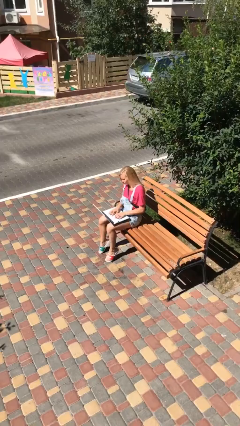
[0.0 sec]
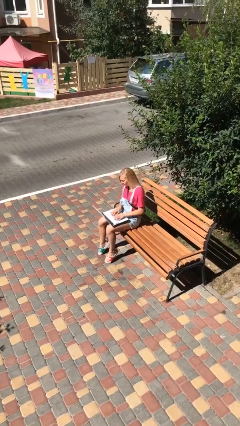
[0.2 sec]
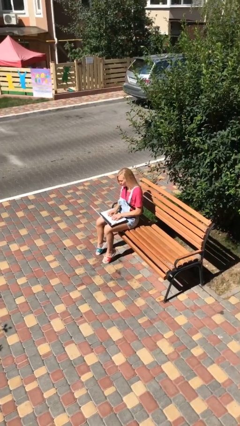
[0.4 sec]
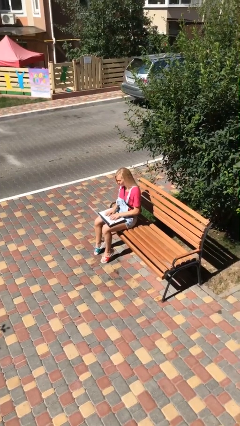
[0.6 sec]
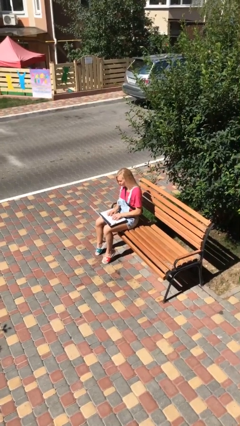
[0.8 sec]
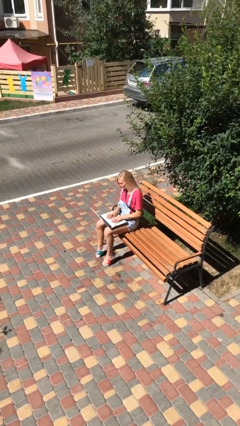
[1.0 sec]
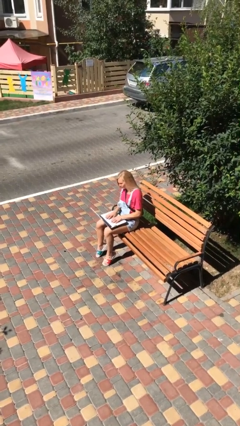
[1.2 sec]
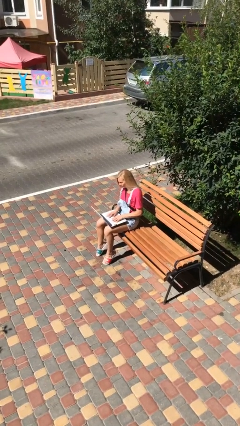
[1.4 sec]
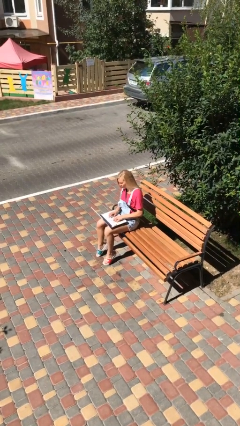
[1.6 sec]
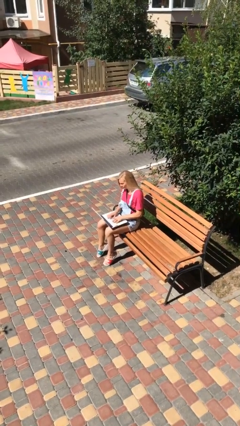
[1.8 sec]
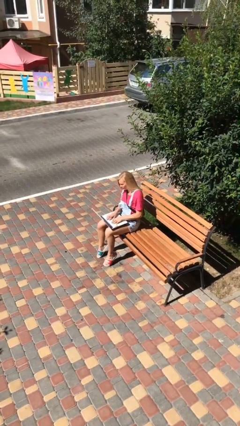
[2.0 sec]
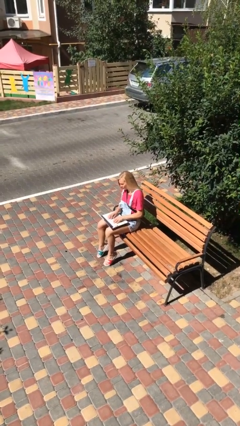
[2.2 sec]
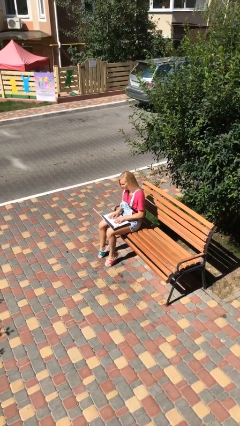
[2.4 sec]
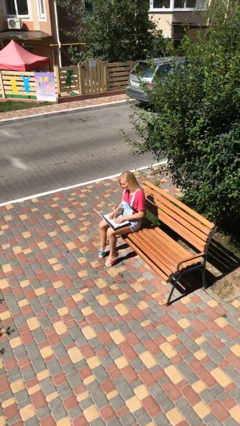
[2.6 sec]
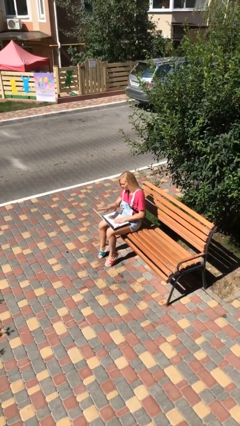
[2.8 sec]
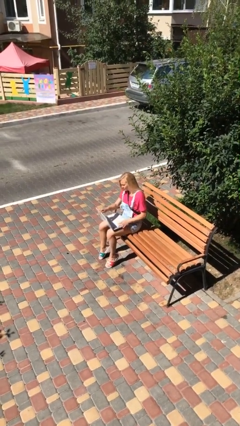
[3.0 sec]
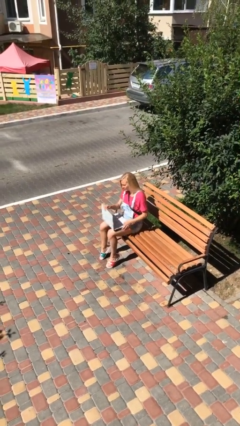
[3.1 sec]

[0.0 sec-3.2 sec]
person interacts with laptop

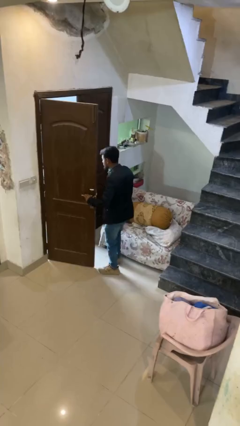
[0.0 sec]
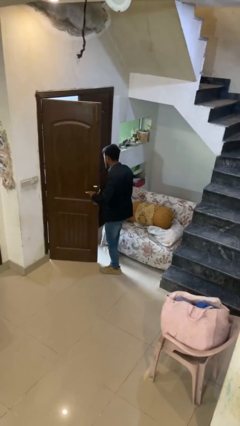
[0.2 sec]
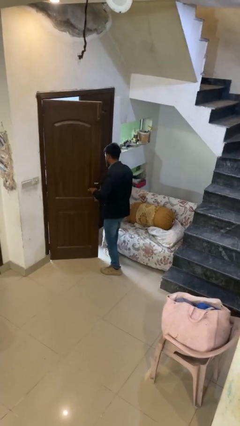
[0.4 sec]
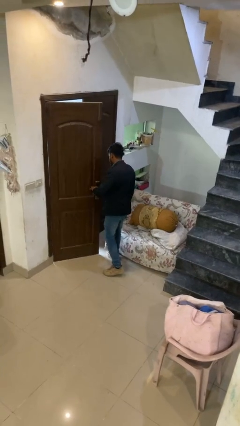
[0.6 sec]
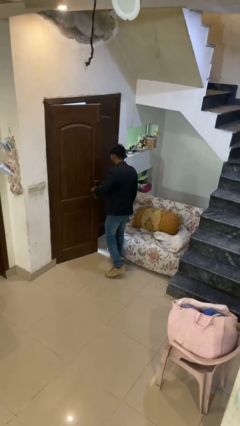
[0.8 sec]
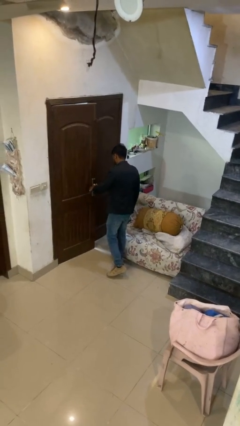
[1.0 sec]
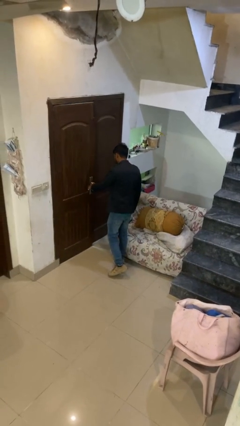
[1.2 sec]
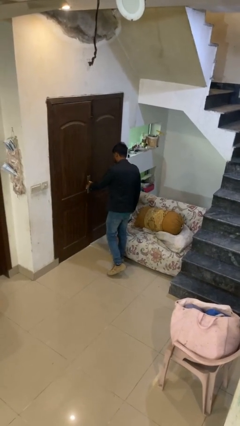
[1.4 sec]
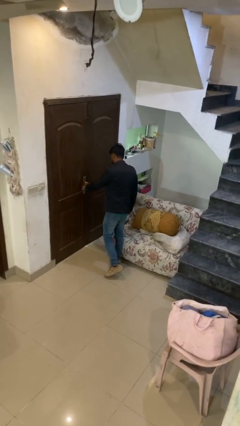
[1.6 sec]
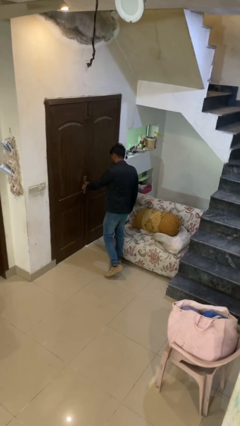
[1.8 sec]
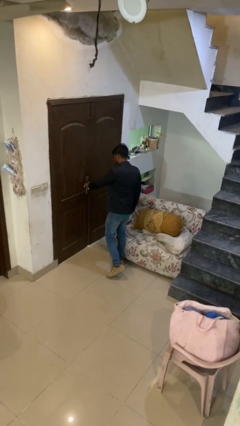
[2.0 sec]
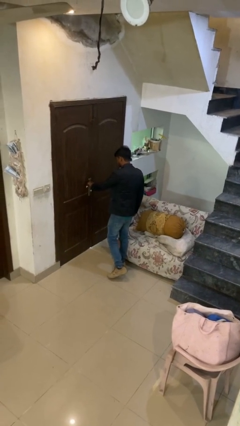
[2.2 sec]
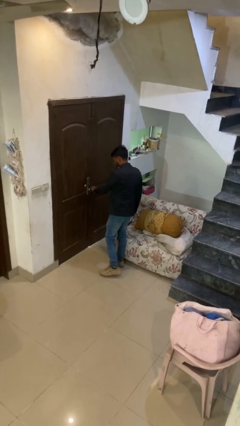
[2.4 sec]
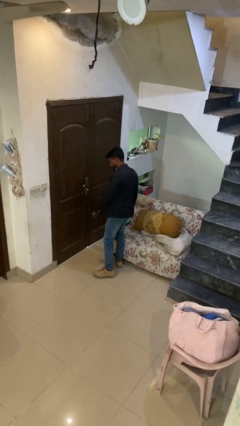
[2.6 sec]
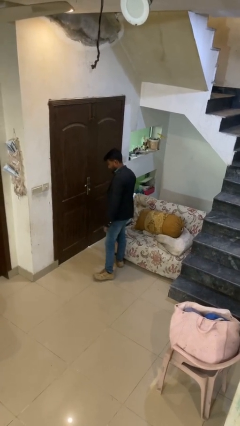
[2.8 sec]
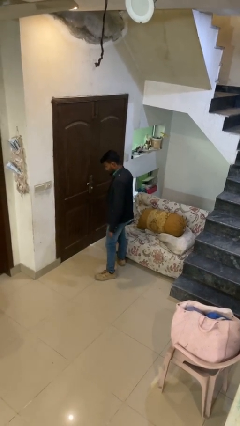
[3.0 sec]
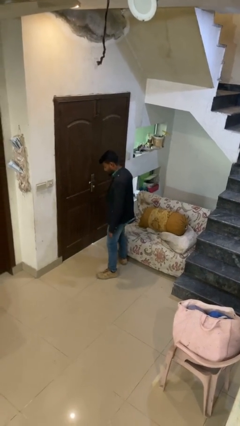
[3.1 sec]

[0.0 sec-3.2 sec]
person closes facility door

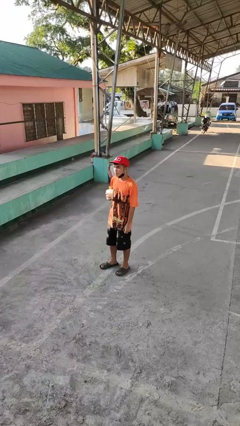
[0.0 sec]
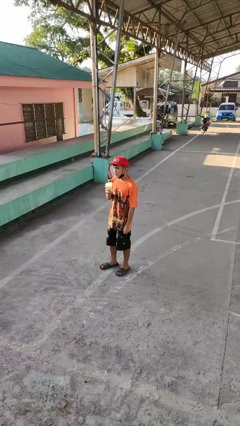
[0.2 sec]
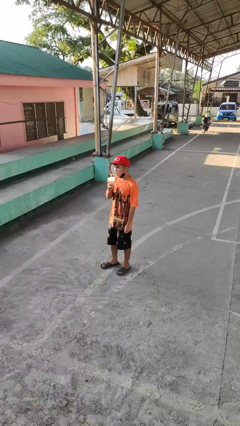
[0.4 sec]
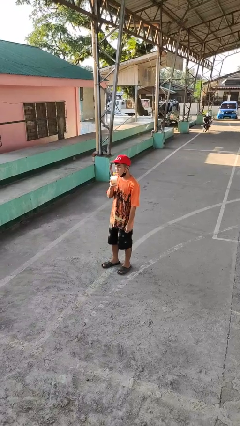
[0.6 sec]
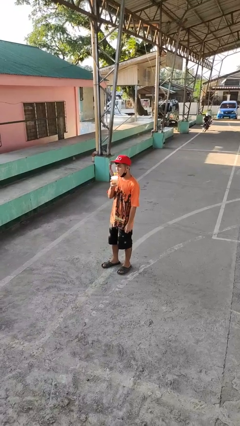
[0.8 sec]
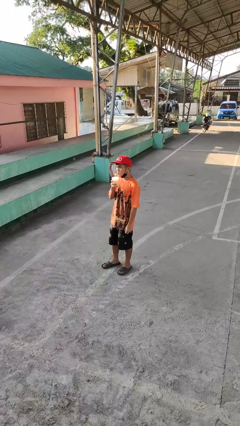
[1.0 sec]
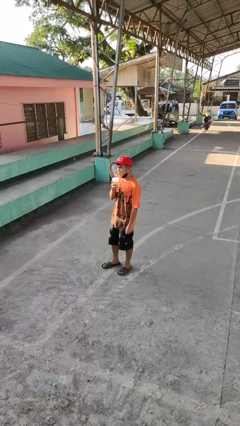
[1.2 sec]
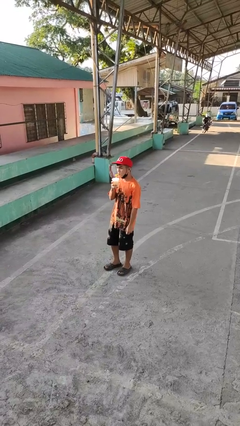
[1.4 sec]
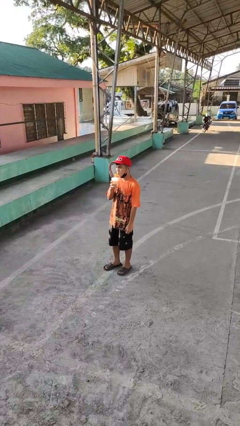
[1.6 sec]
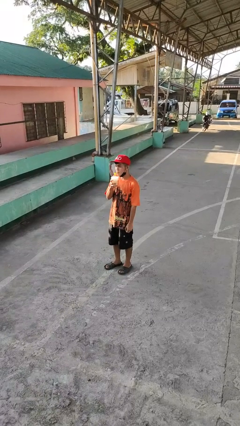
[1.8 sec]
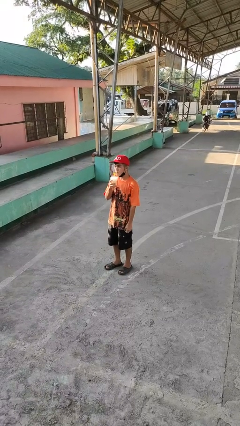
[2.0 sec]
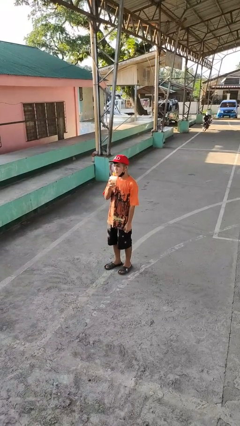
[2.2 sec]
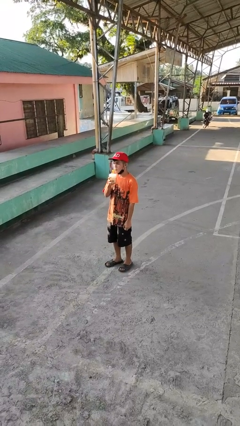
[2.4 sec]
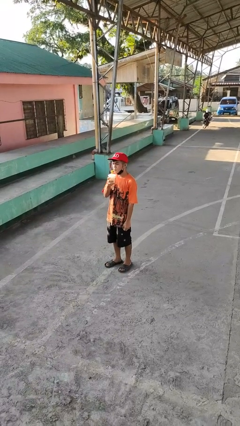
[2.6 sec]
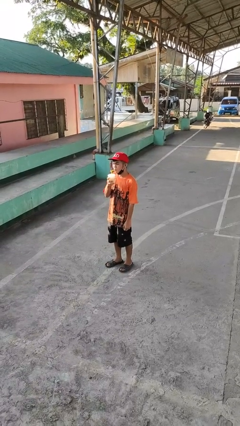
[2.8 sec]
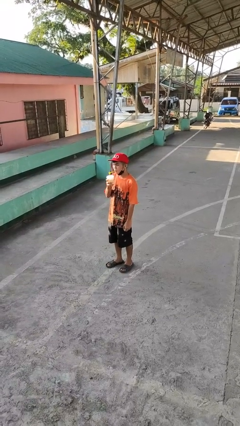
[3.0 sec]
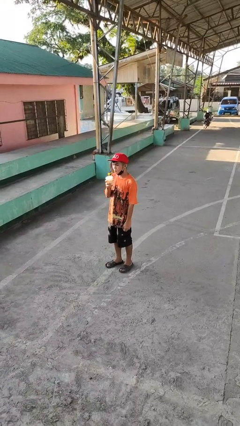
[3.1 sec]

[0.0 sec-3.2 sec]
person drinks from straw

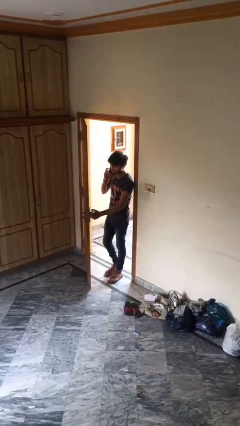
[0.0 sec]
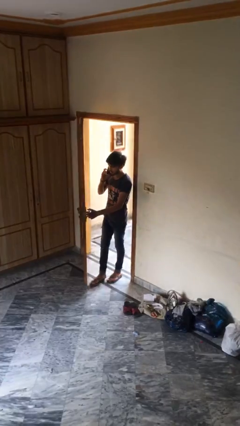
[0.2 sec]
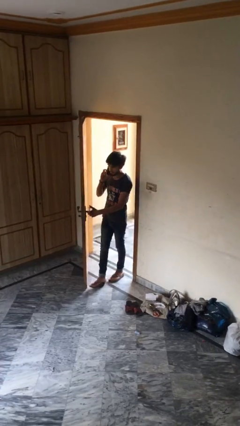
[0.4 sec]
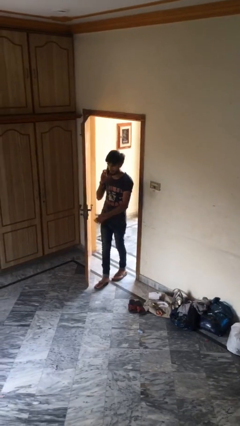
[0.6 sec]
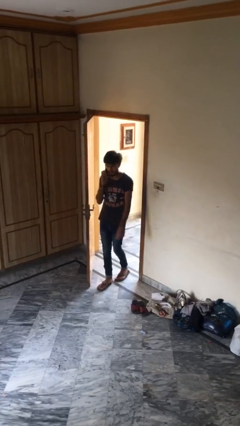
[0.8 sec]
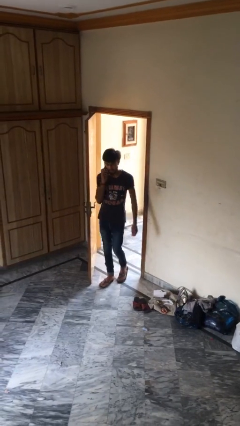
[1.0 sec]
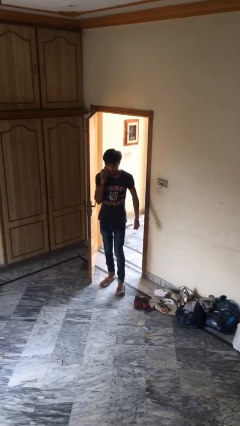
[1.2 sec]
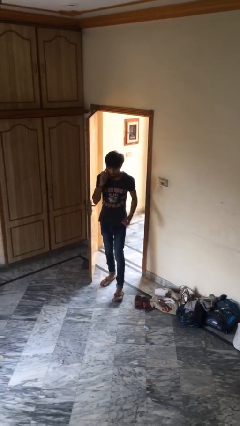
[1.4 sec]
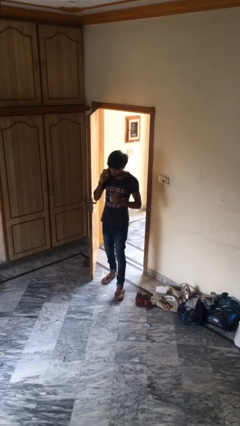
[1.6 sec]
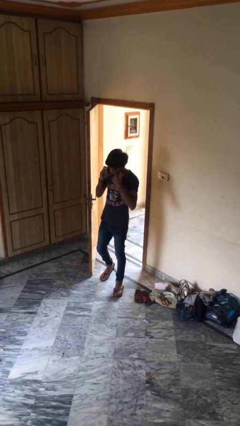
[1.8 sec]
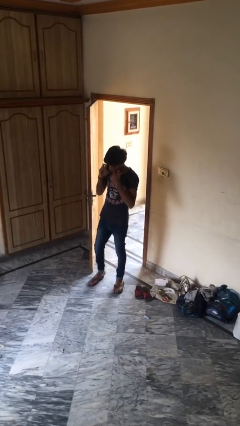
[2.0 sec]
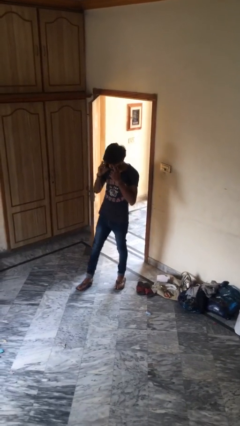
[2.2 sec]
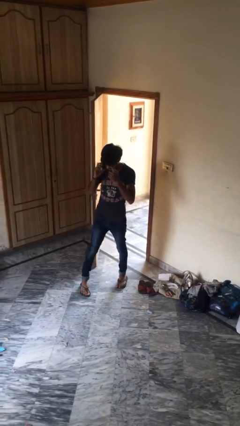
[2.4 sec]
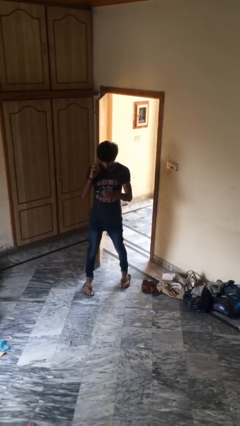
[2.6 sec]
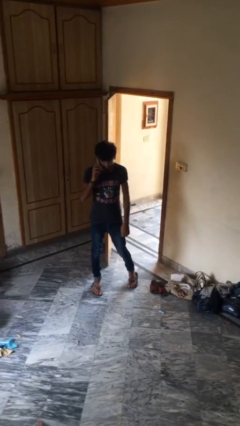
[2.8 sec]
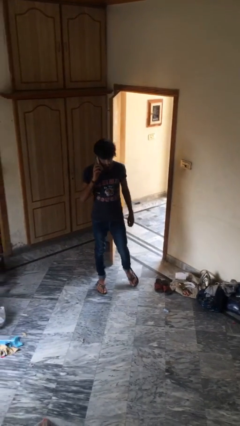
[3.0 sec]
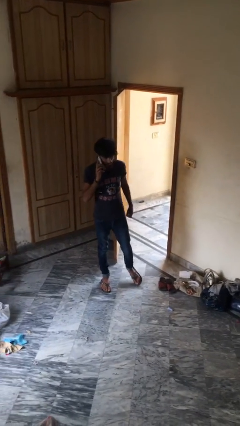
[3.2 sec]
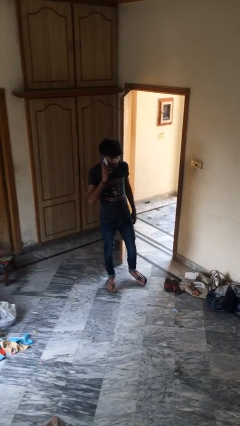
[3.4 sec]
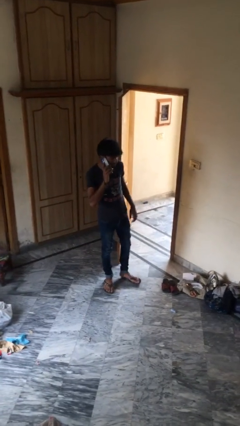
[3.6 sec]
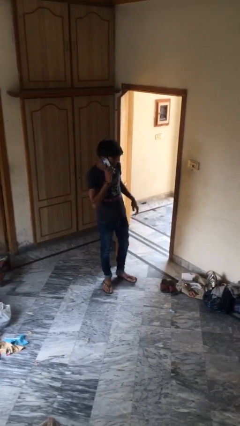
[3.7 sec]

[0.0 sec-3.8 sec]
person enters scene through structure

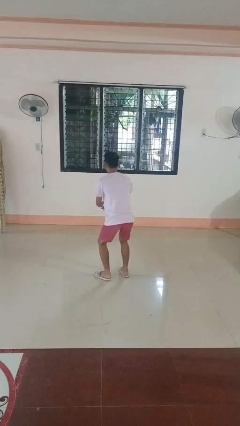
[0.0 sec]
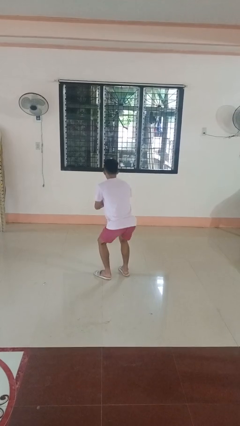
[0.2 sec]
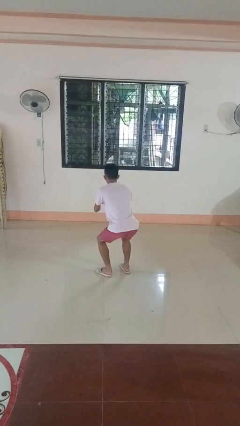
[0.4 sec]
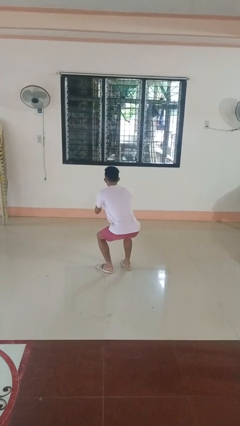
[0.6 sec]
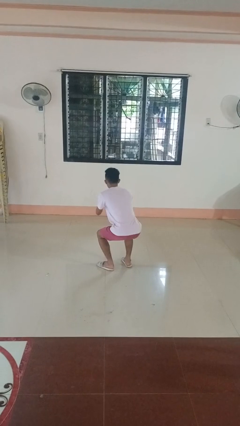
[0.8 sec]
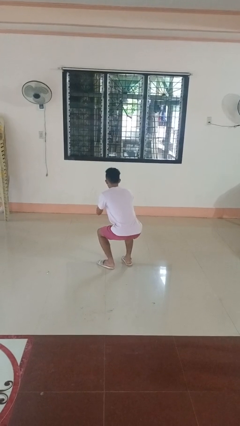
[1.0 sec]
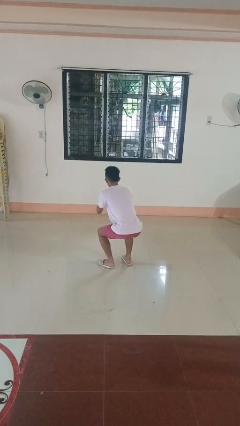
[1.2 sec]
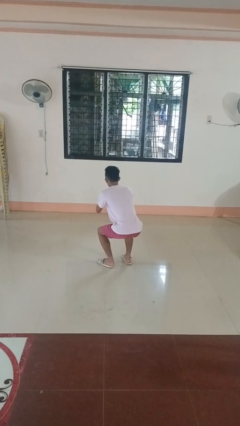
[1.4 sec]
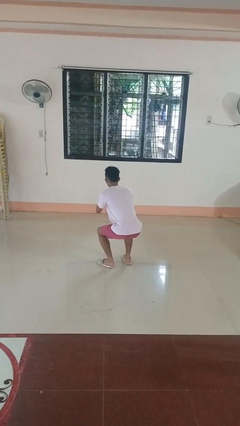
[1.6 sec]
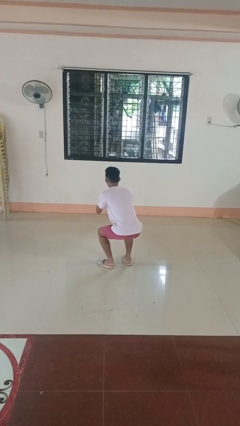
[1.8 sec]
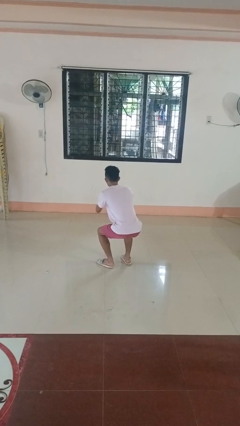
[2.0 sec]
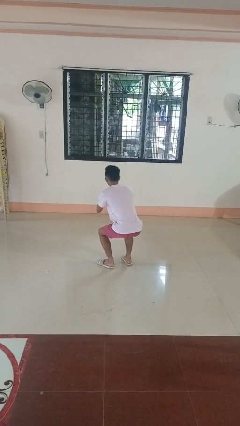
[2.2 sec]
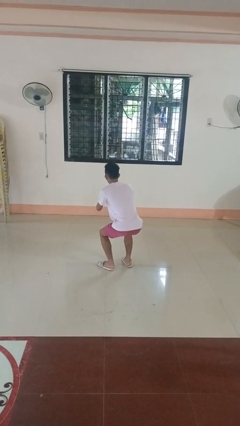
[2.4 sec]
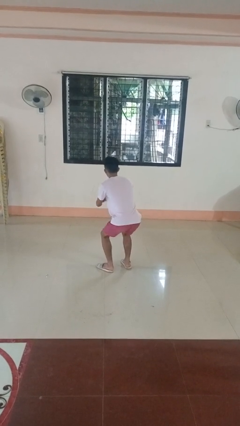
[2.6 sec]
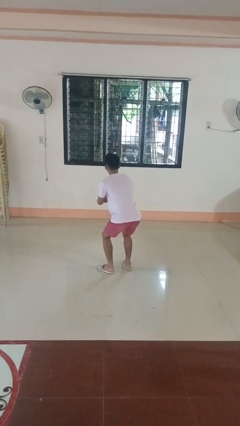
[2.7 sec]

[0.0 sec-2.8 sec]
person squats

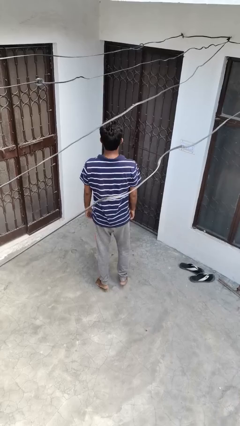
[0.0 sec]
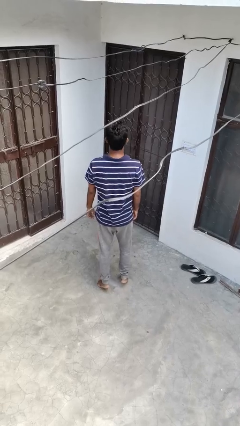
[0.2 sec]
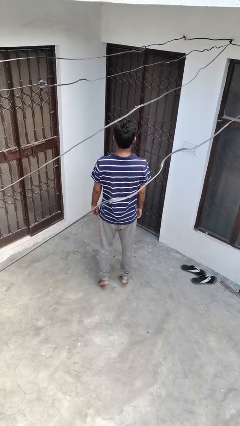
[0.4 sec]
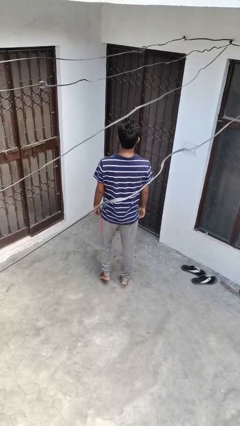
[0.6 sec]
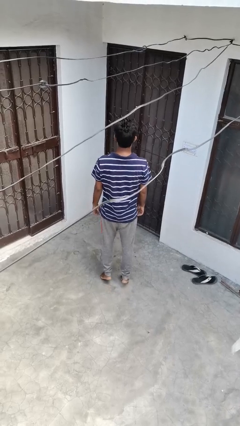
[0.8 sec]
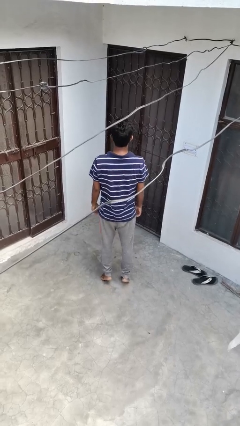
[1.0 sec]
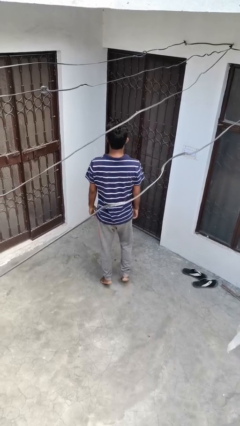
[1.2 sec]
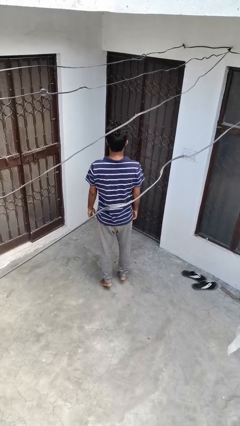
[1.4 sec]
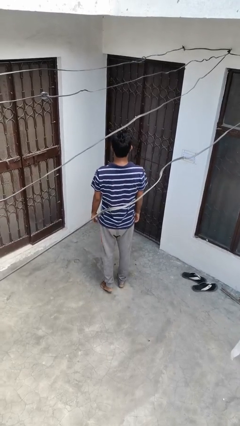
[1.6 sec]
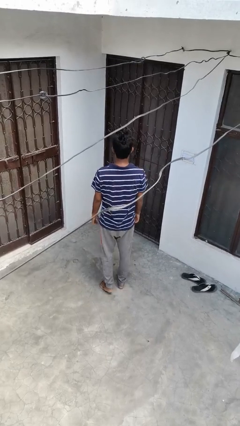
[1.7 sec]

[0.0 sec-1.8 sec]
person walks tiptoe
